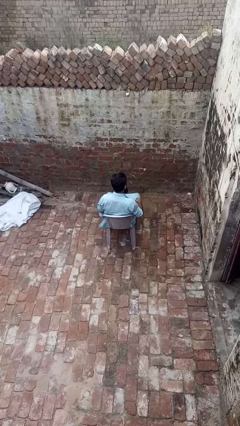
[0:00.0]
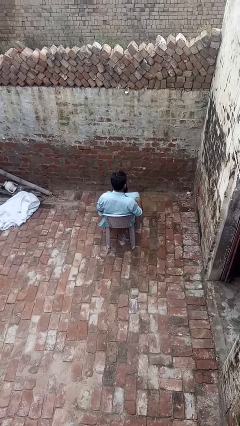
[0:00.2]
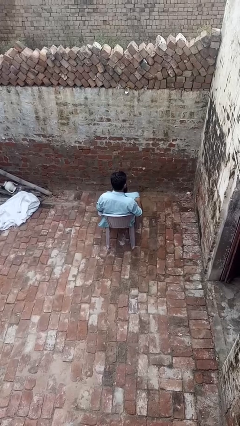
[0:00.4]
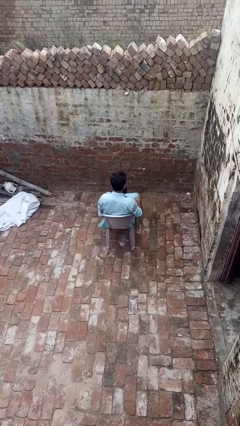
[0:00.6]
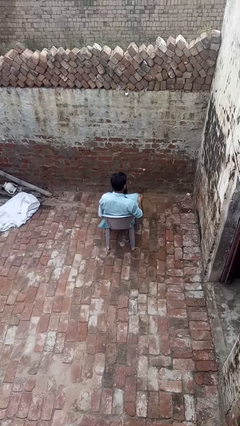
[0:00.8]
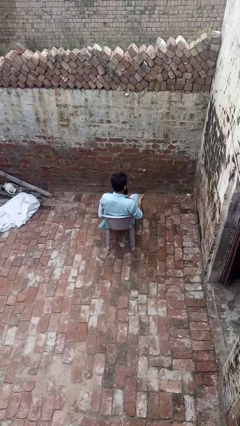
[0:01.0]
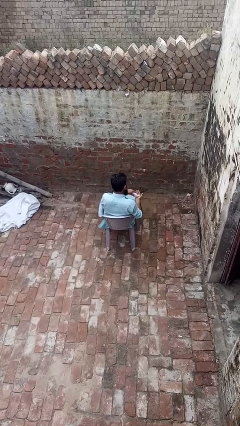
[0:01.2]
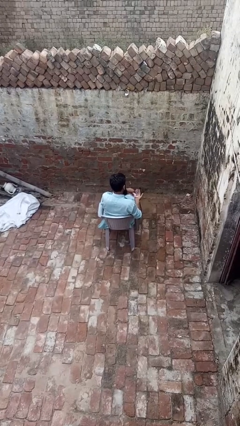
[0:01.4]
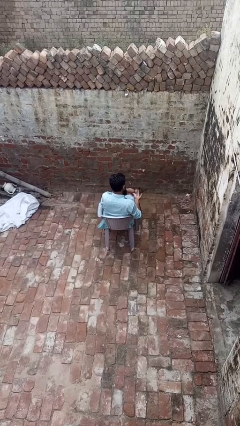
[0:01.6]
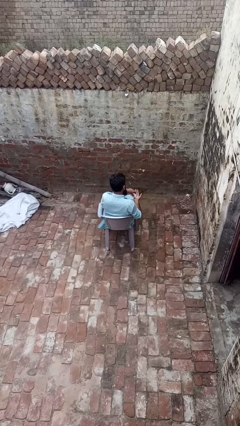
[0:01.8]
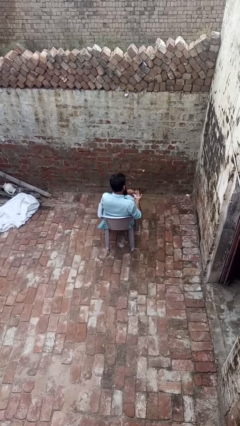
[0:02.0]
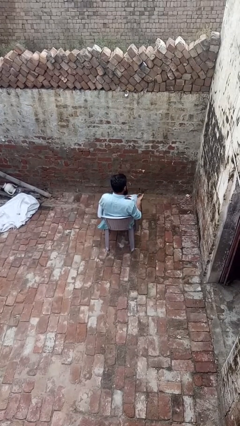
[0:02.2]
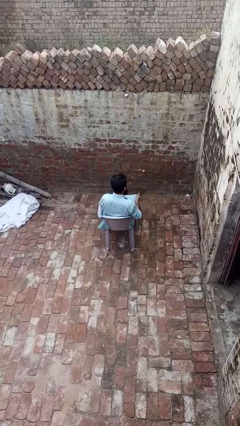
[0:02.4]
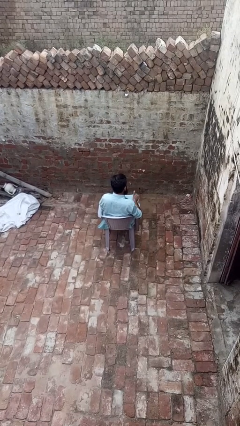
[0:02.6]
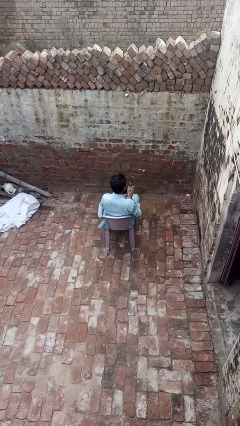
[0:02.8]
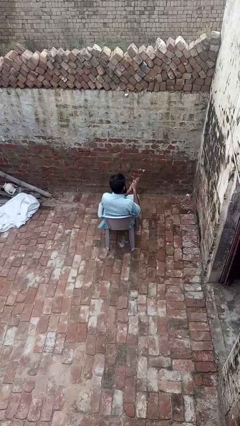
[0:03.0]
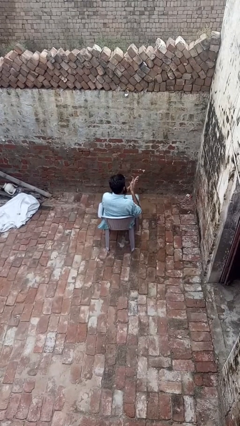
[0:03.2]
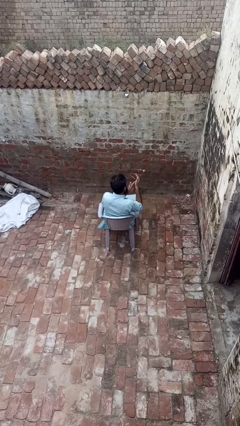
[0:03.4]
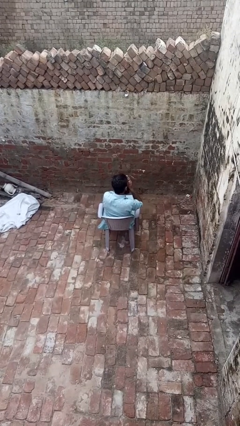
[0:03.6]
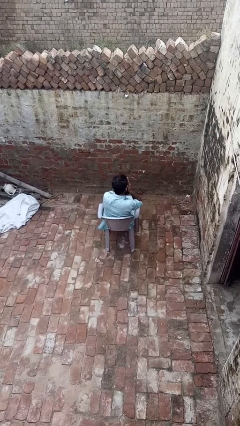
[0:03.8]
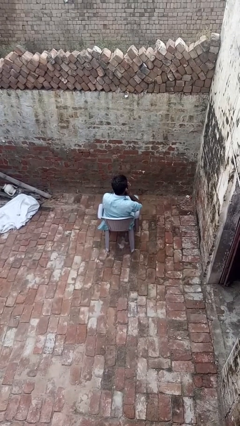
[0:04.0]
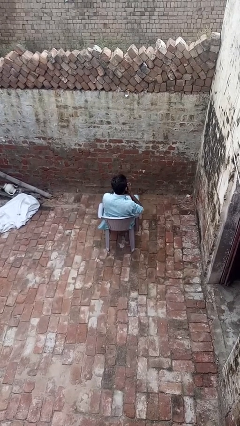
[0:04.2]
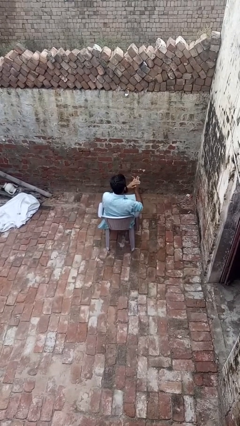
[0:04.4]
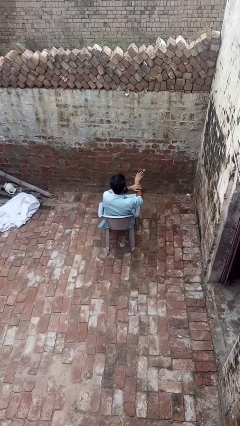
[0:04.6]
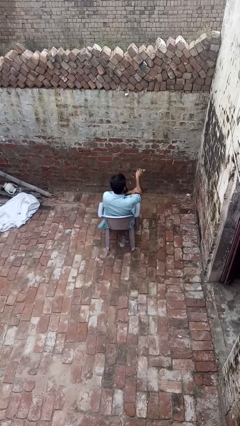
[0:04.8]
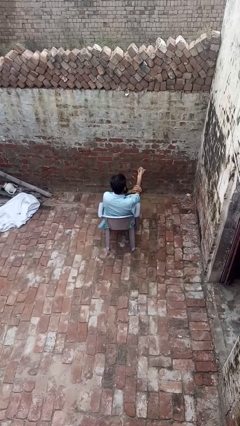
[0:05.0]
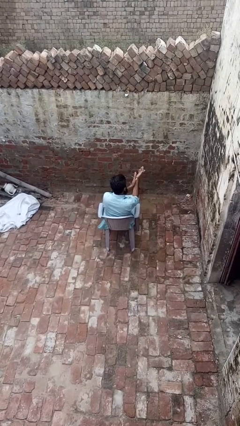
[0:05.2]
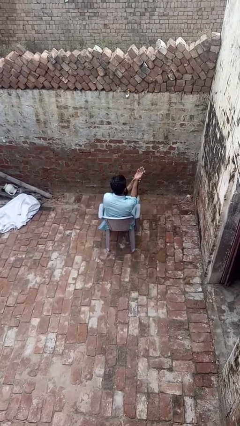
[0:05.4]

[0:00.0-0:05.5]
person applies sunscreen

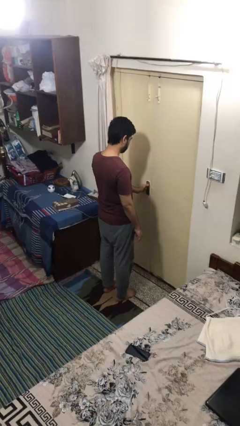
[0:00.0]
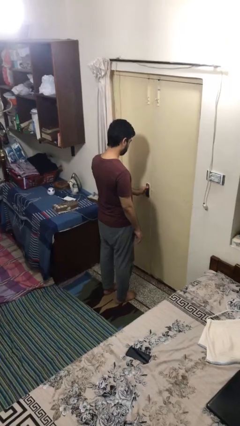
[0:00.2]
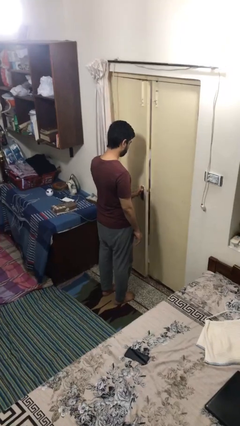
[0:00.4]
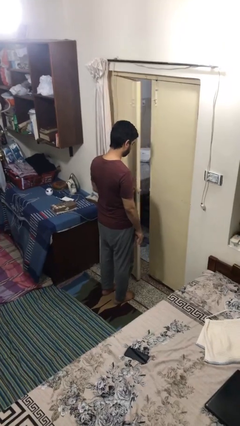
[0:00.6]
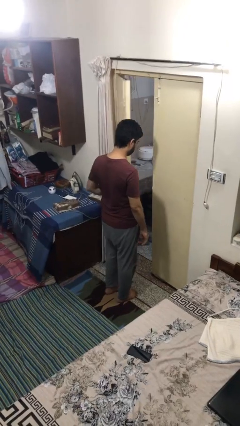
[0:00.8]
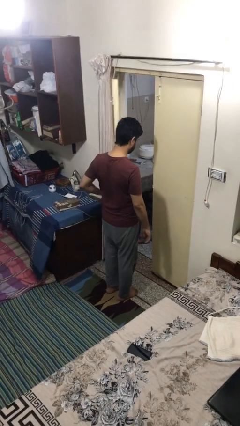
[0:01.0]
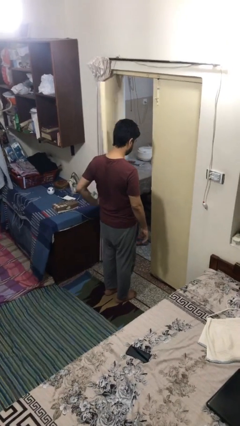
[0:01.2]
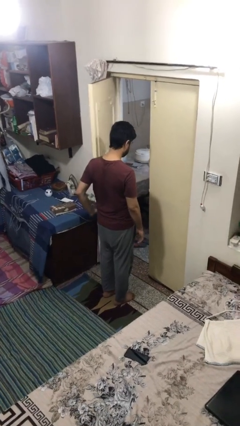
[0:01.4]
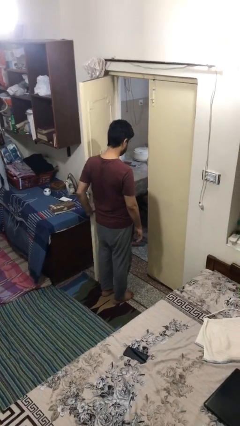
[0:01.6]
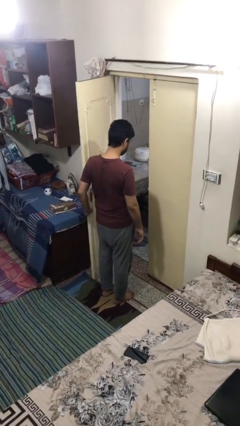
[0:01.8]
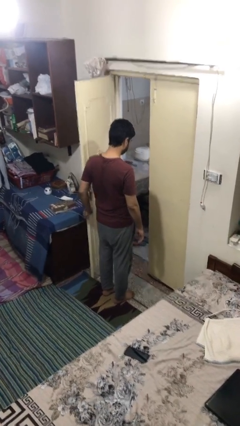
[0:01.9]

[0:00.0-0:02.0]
person opens facility door

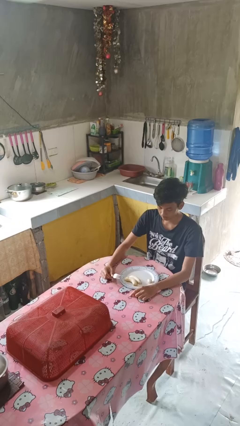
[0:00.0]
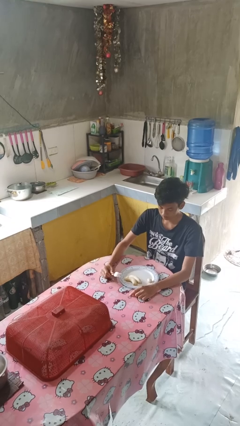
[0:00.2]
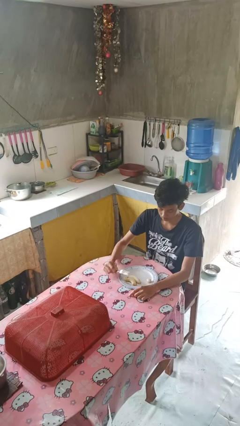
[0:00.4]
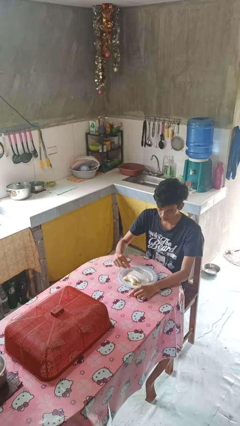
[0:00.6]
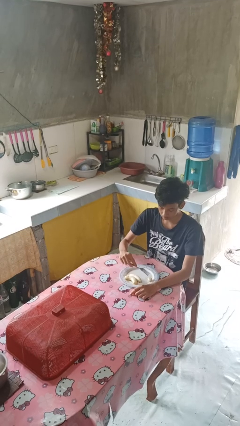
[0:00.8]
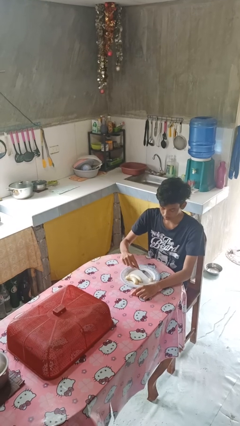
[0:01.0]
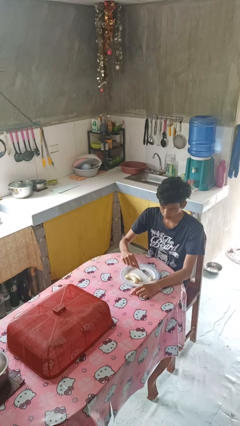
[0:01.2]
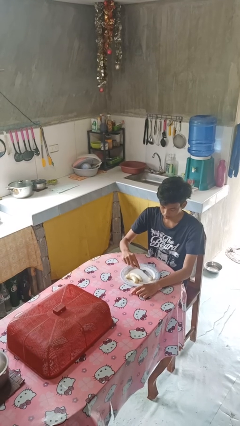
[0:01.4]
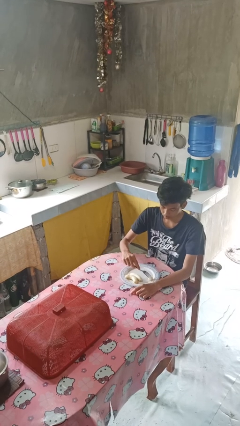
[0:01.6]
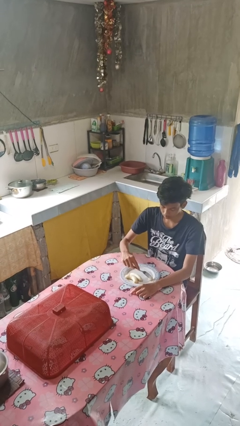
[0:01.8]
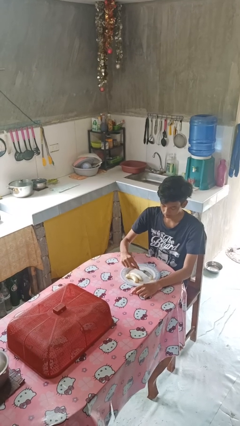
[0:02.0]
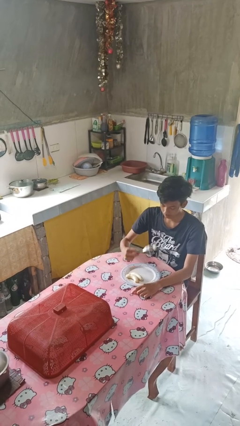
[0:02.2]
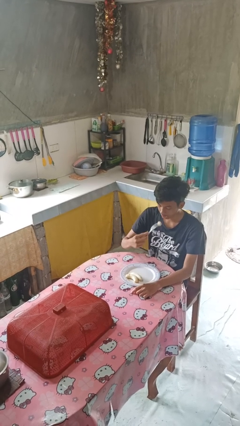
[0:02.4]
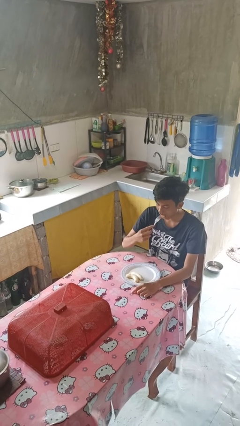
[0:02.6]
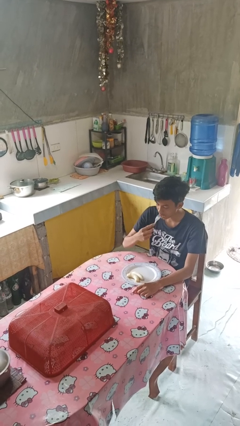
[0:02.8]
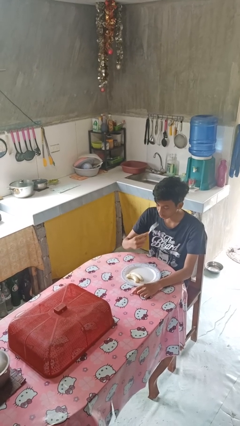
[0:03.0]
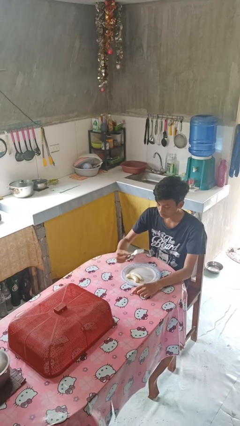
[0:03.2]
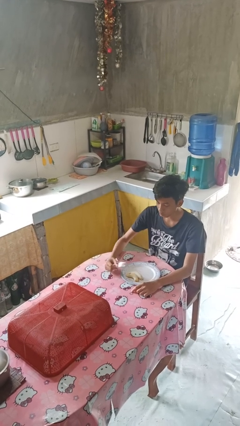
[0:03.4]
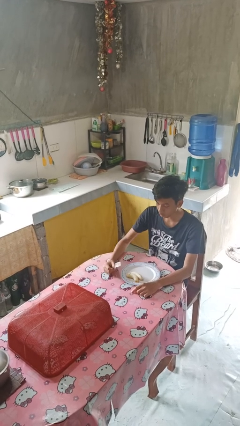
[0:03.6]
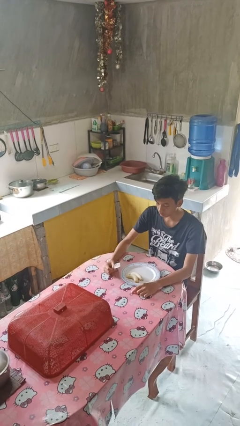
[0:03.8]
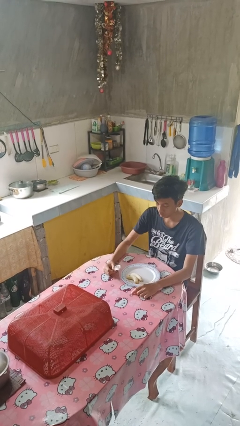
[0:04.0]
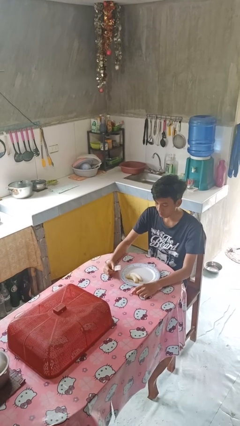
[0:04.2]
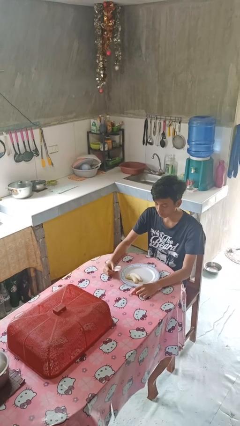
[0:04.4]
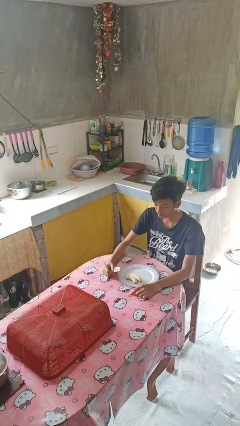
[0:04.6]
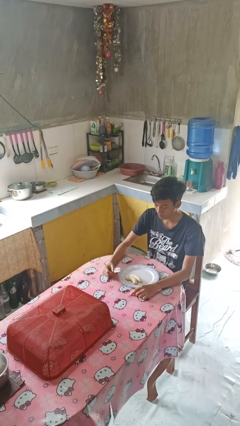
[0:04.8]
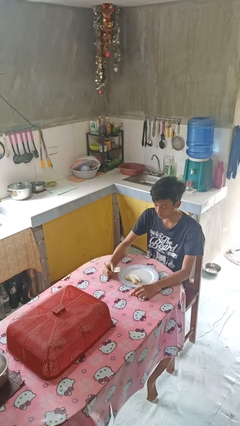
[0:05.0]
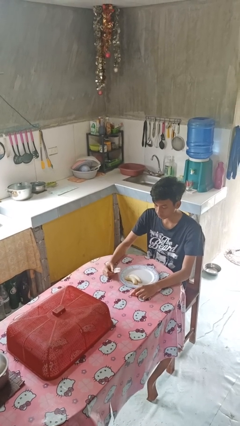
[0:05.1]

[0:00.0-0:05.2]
person eats with utensil

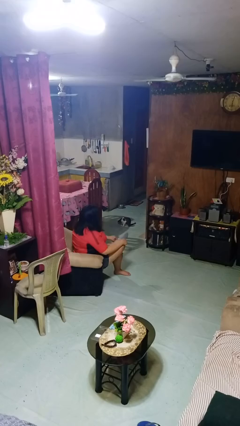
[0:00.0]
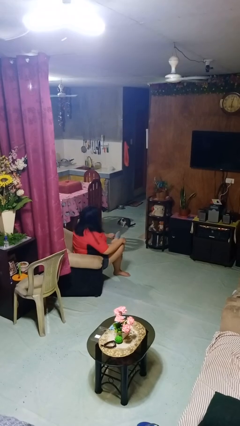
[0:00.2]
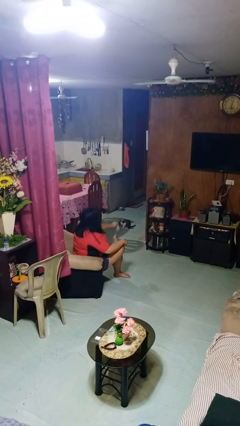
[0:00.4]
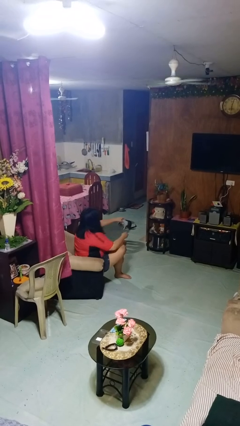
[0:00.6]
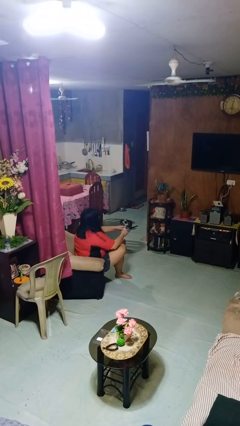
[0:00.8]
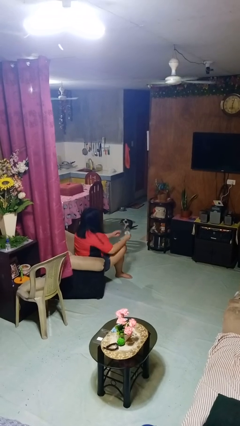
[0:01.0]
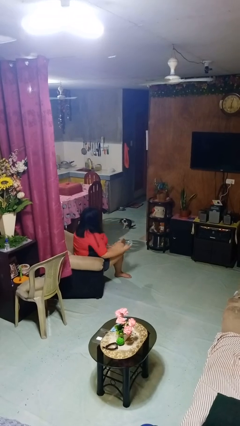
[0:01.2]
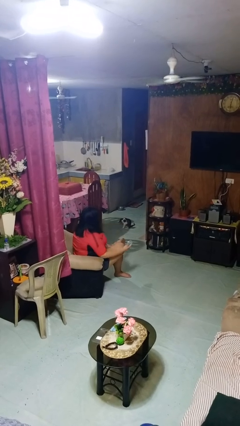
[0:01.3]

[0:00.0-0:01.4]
person takes off socks

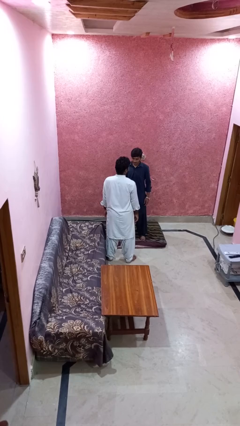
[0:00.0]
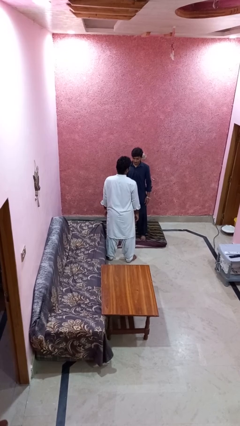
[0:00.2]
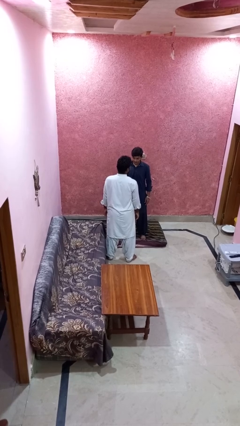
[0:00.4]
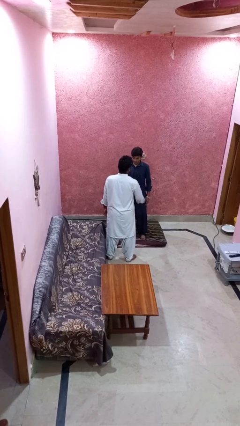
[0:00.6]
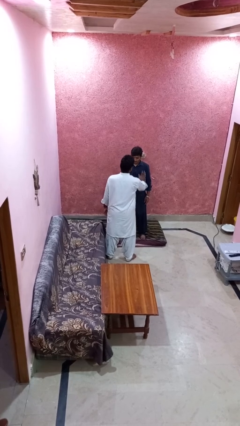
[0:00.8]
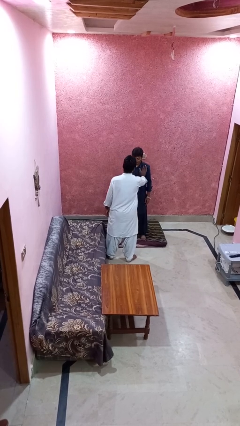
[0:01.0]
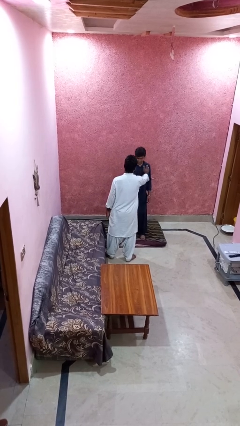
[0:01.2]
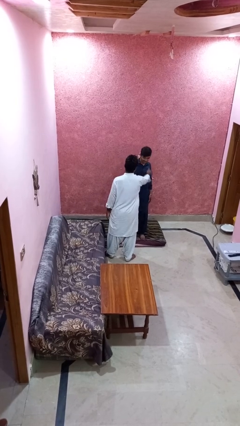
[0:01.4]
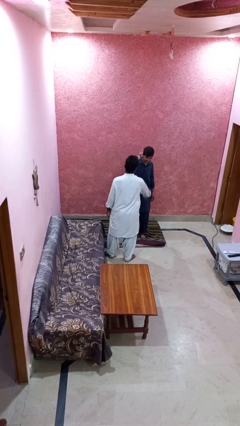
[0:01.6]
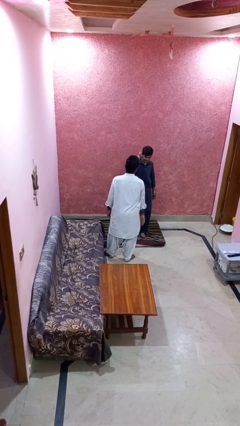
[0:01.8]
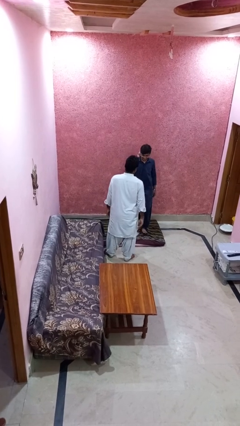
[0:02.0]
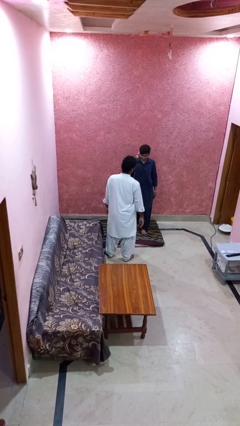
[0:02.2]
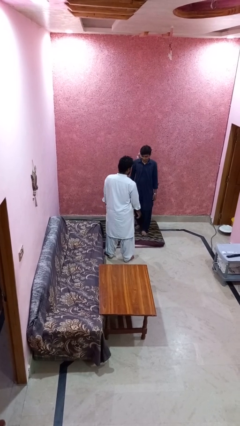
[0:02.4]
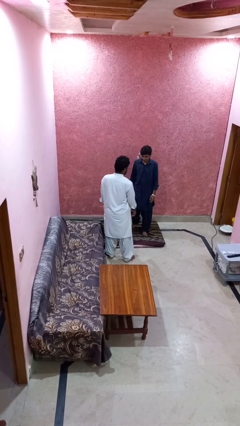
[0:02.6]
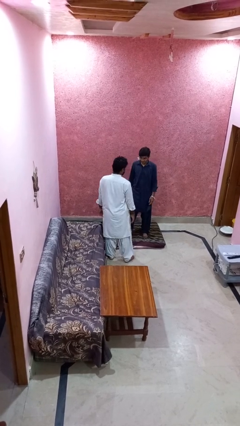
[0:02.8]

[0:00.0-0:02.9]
person shoves person

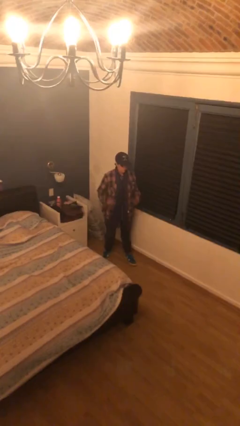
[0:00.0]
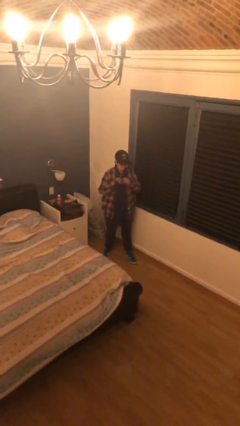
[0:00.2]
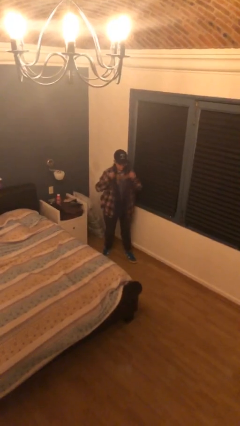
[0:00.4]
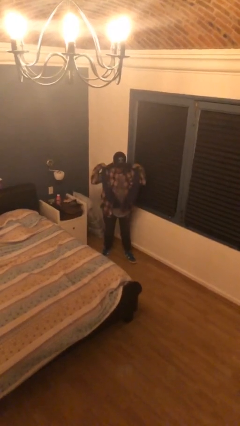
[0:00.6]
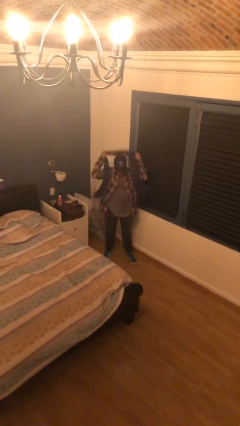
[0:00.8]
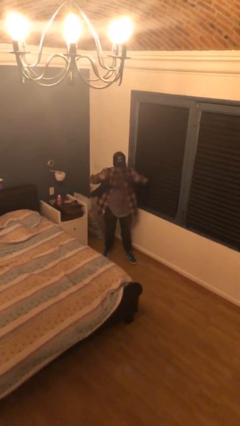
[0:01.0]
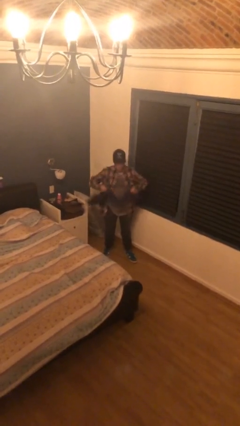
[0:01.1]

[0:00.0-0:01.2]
person takes off scarf
